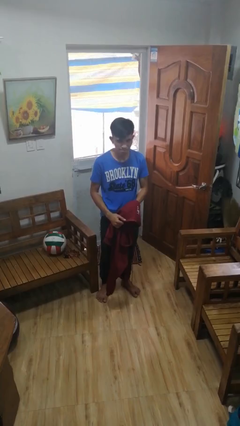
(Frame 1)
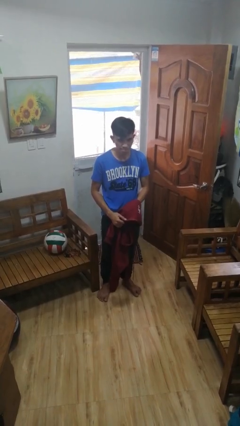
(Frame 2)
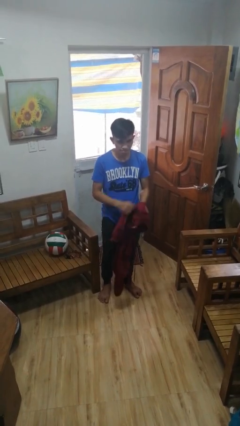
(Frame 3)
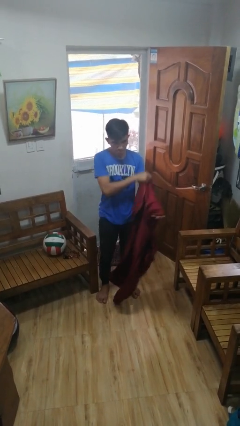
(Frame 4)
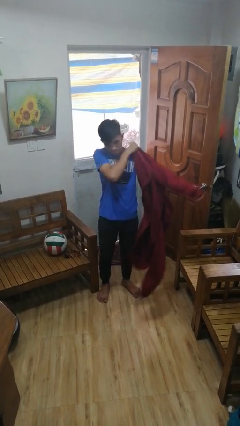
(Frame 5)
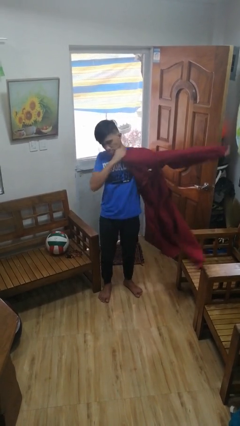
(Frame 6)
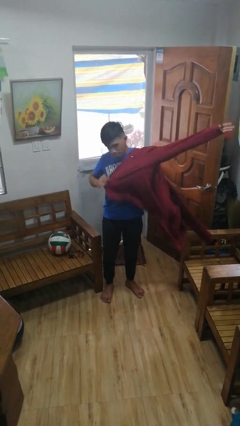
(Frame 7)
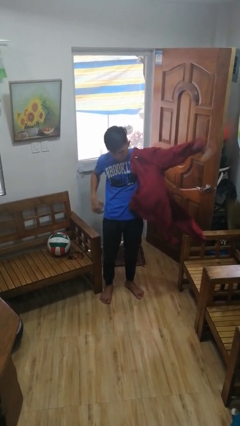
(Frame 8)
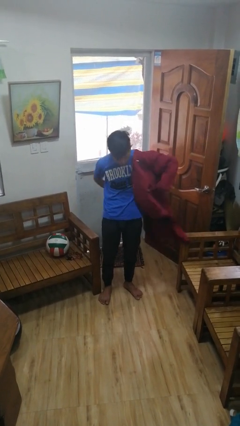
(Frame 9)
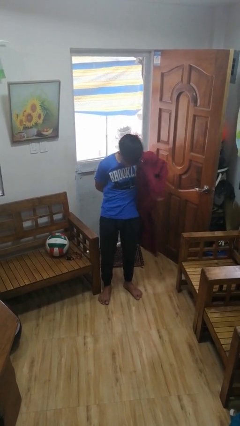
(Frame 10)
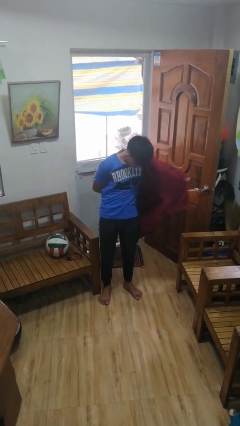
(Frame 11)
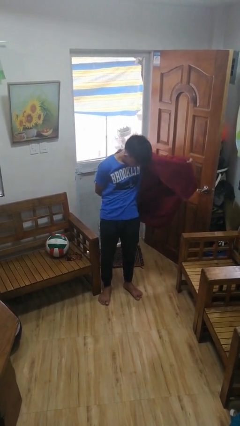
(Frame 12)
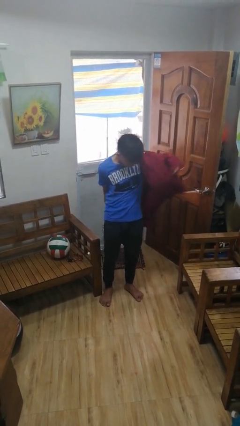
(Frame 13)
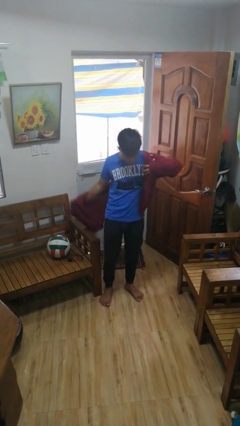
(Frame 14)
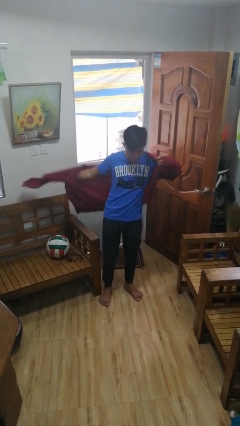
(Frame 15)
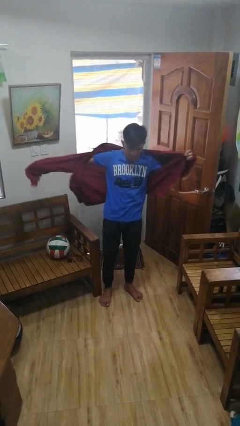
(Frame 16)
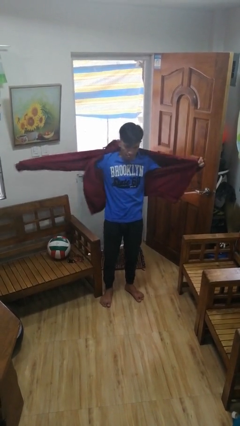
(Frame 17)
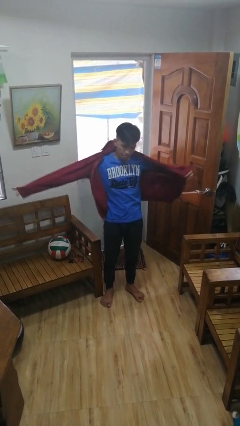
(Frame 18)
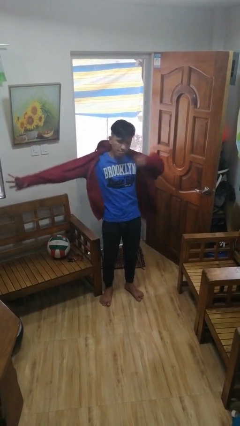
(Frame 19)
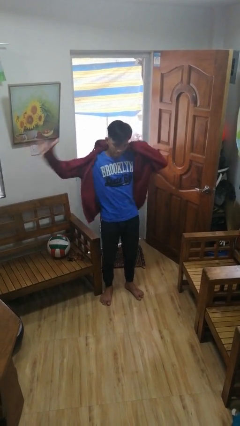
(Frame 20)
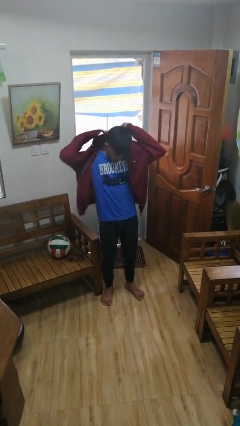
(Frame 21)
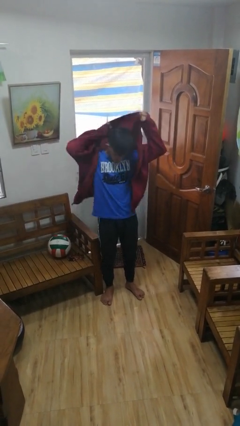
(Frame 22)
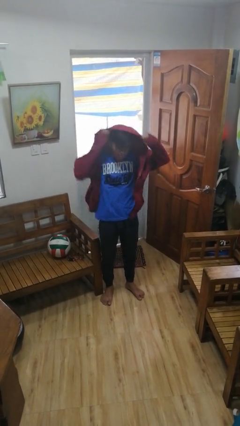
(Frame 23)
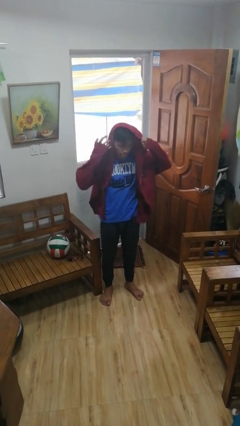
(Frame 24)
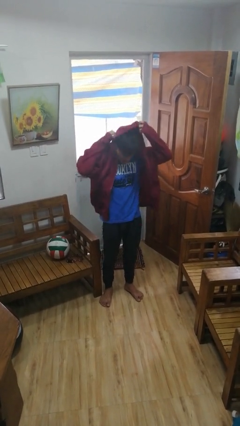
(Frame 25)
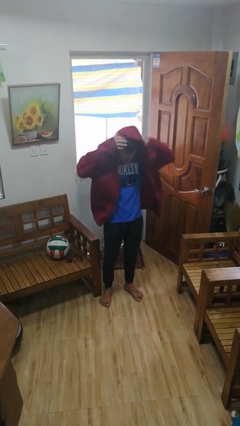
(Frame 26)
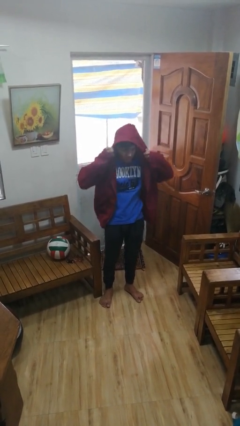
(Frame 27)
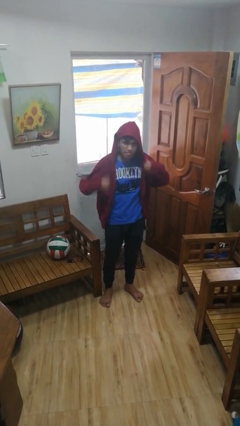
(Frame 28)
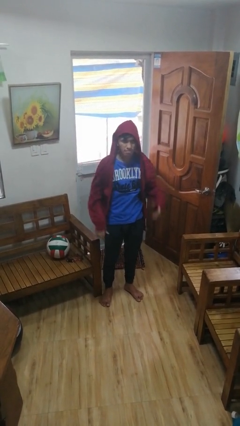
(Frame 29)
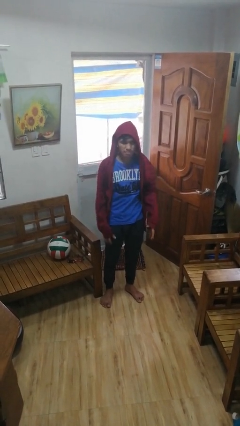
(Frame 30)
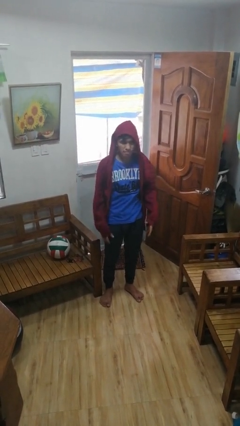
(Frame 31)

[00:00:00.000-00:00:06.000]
person puts on hoodie

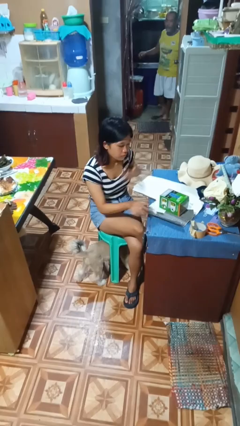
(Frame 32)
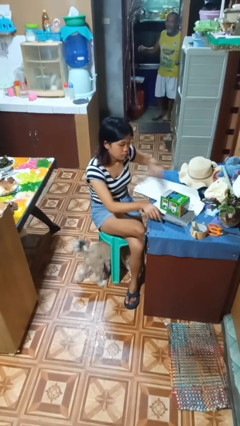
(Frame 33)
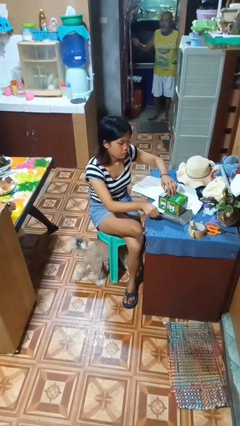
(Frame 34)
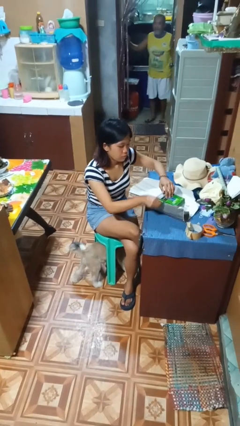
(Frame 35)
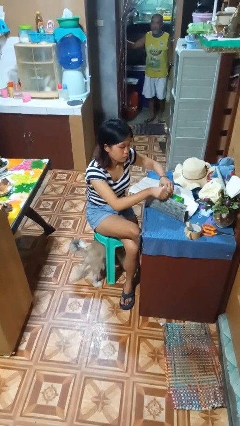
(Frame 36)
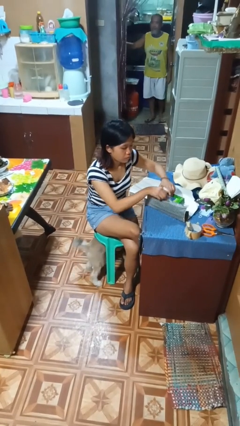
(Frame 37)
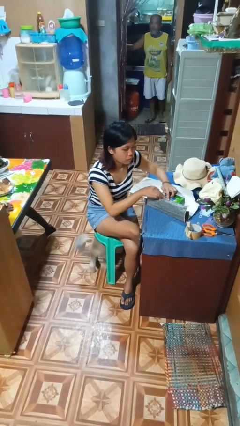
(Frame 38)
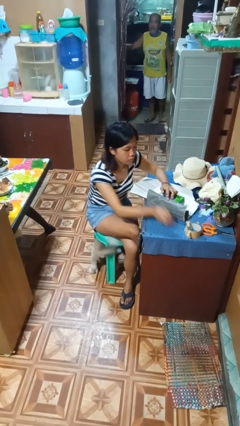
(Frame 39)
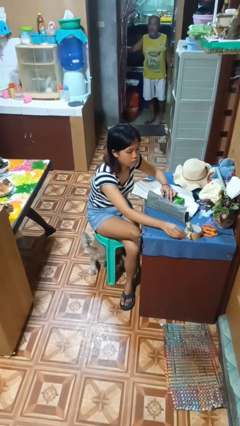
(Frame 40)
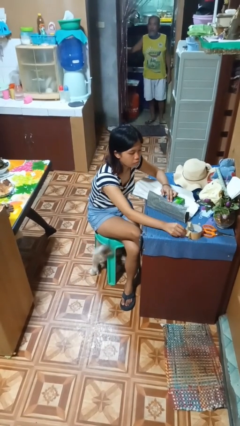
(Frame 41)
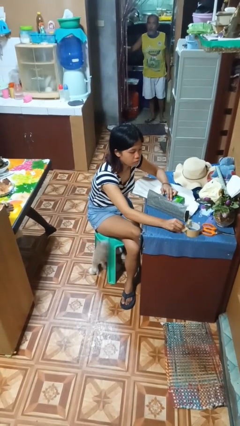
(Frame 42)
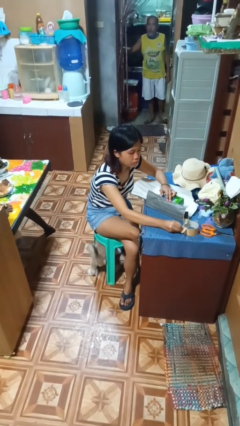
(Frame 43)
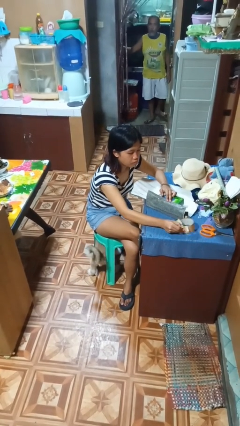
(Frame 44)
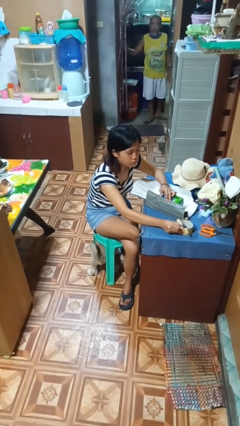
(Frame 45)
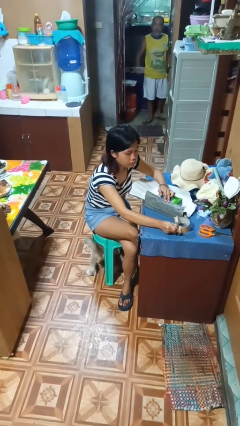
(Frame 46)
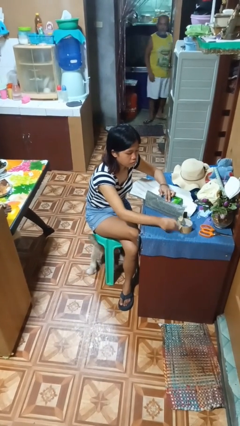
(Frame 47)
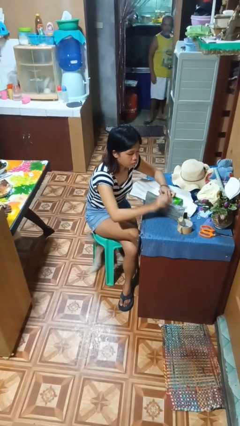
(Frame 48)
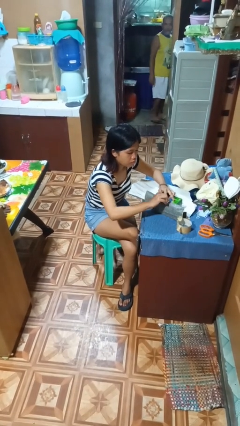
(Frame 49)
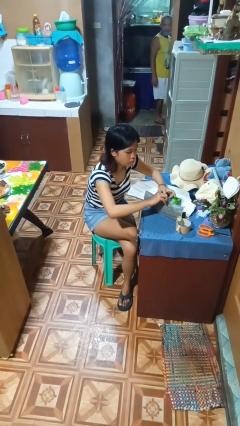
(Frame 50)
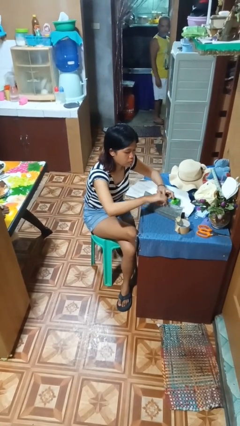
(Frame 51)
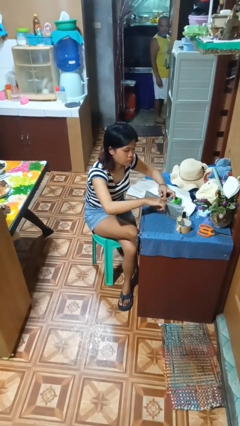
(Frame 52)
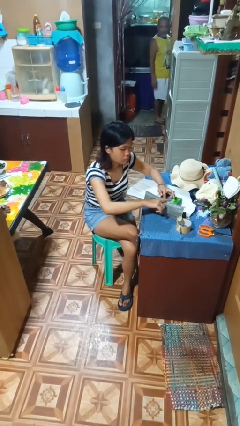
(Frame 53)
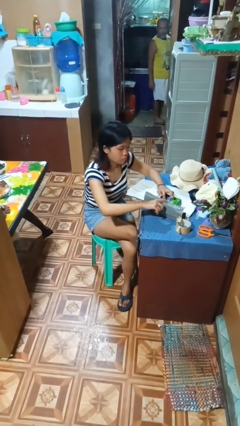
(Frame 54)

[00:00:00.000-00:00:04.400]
person wraps box

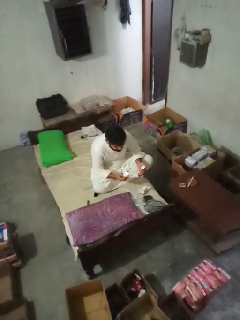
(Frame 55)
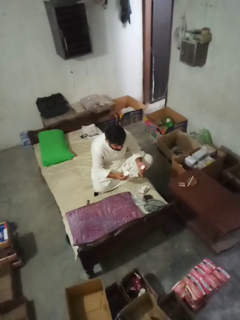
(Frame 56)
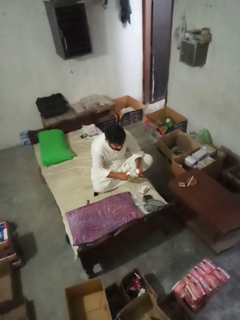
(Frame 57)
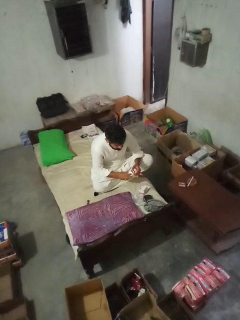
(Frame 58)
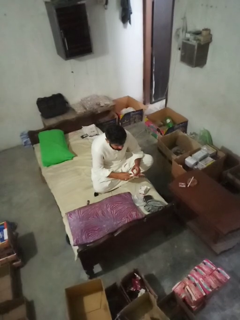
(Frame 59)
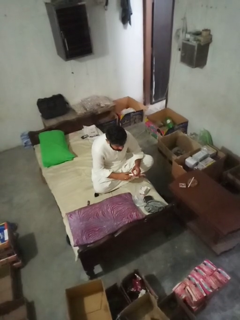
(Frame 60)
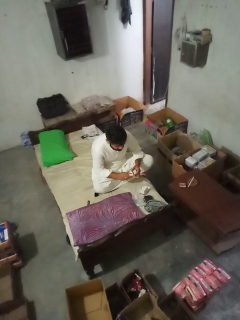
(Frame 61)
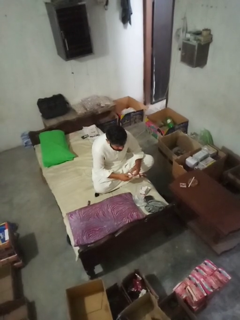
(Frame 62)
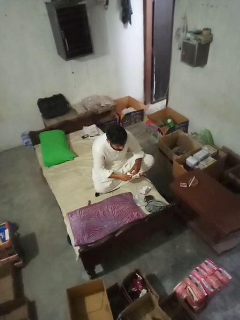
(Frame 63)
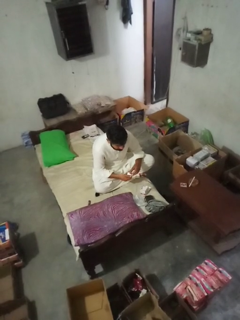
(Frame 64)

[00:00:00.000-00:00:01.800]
person closes jar

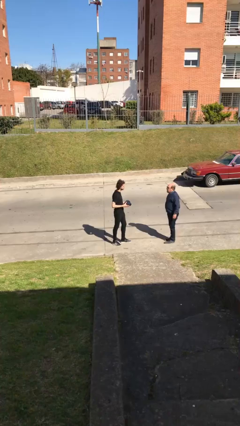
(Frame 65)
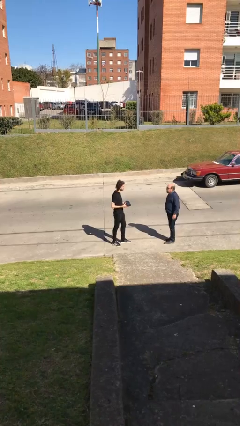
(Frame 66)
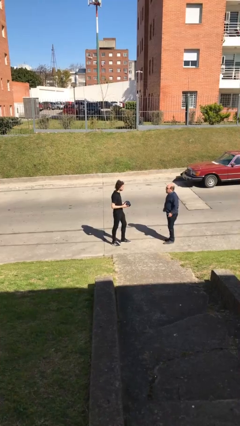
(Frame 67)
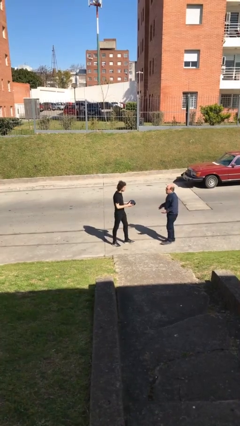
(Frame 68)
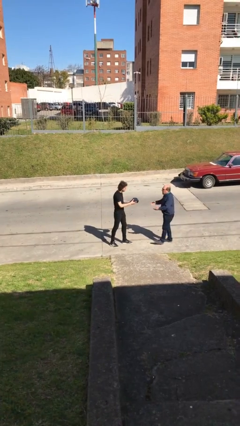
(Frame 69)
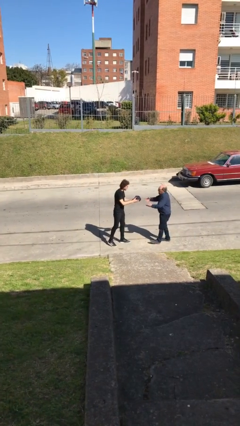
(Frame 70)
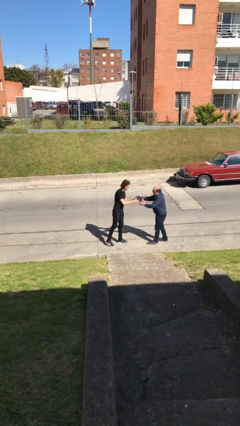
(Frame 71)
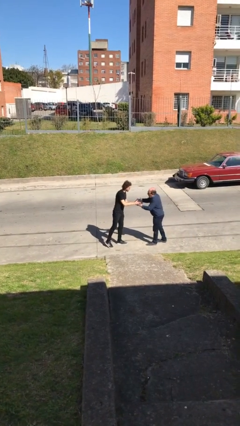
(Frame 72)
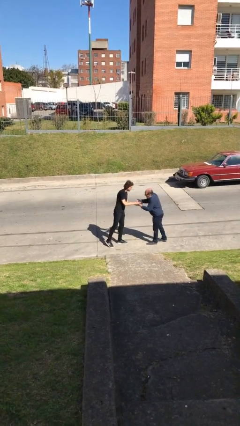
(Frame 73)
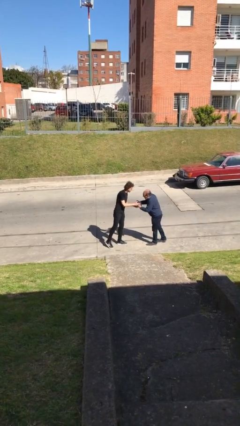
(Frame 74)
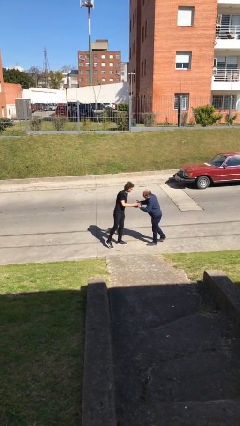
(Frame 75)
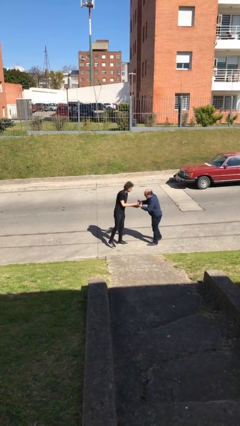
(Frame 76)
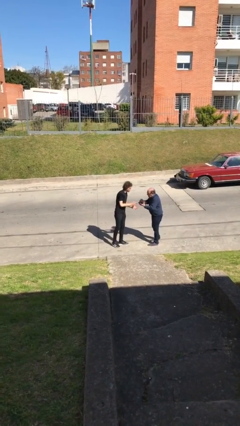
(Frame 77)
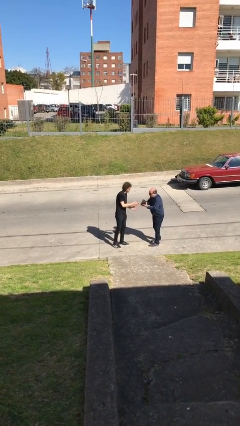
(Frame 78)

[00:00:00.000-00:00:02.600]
person transfers object to person

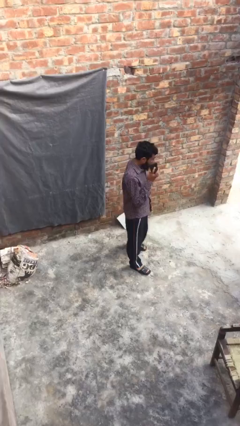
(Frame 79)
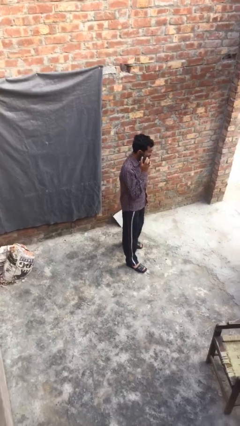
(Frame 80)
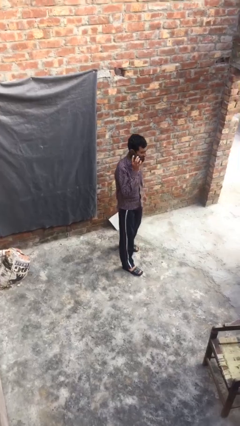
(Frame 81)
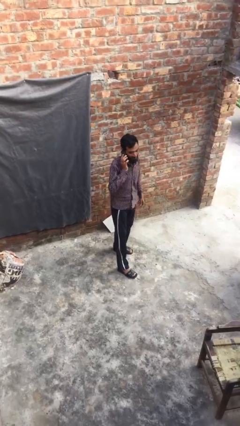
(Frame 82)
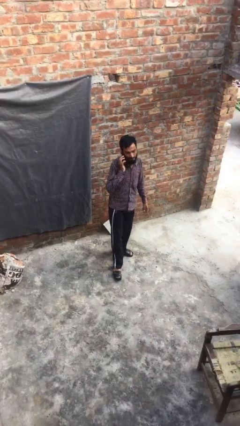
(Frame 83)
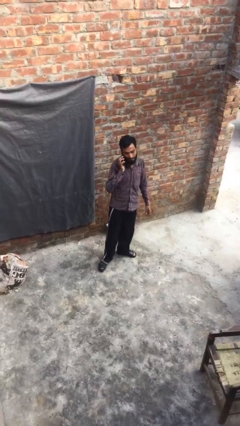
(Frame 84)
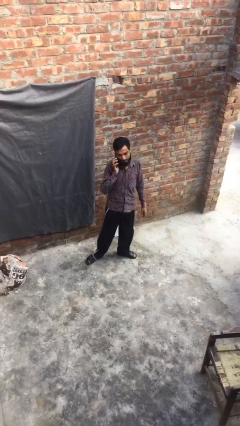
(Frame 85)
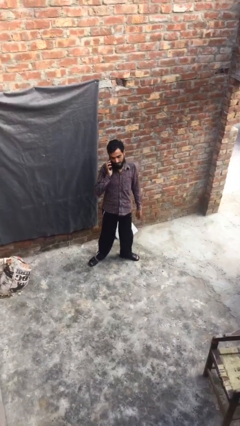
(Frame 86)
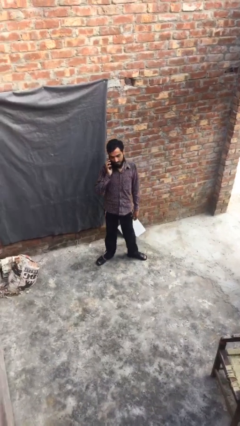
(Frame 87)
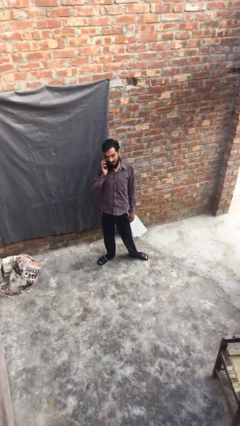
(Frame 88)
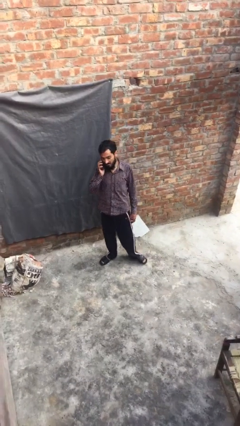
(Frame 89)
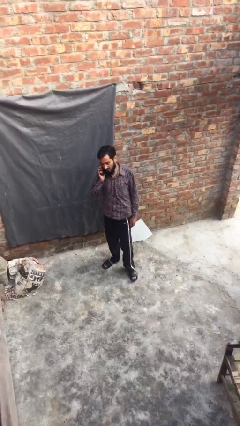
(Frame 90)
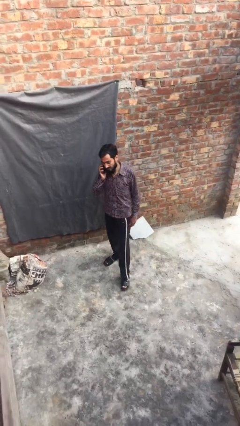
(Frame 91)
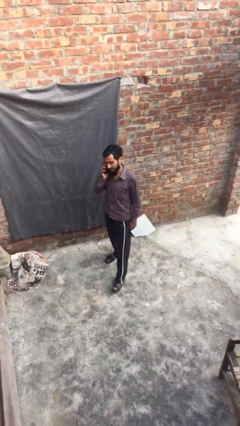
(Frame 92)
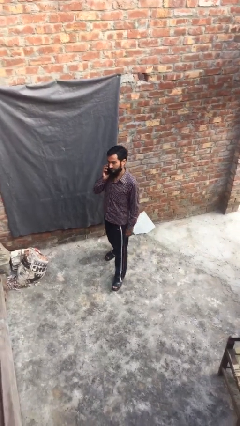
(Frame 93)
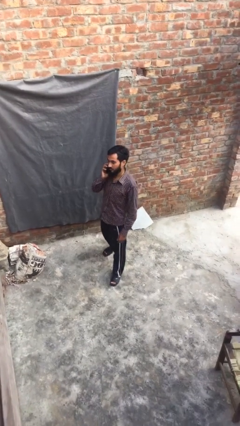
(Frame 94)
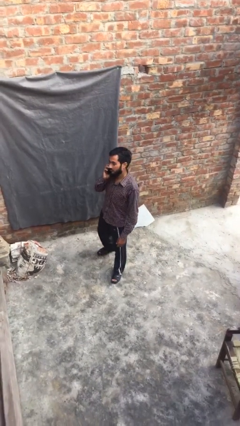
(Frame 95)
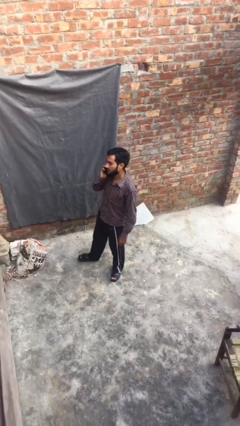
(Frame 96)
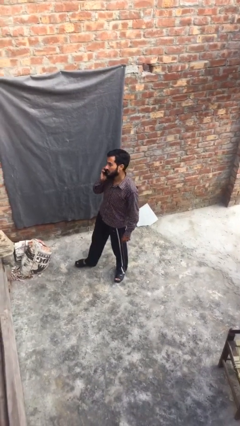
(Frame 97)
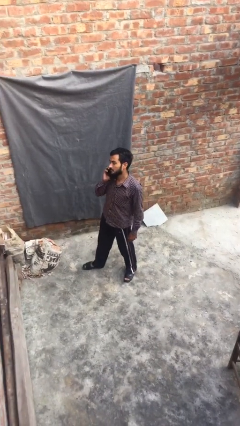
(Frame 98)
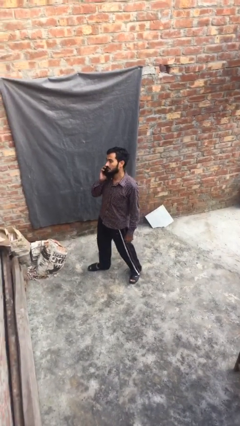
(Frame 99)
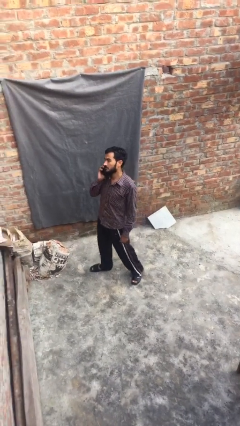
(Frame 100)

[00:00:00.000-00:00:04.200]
person talks on phone
